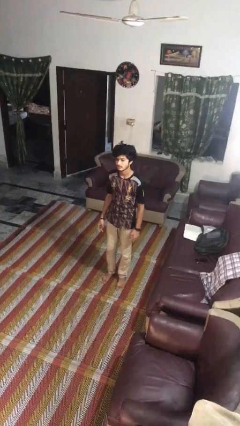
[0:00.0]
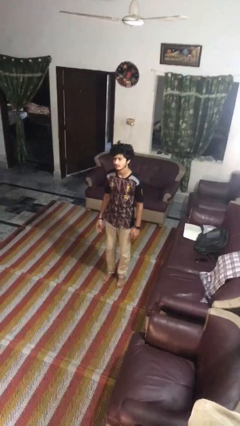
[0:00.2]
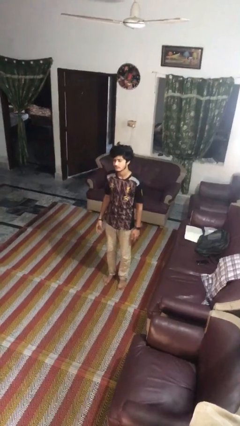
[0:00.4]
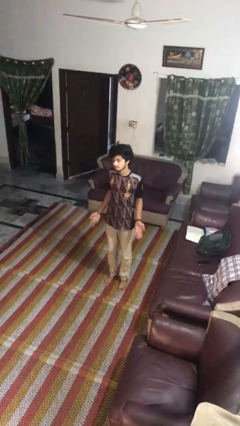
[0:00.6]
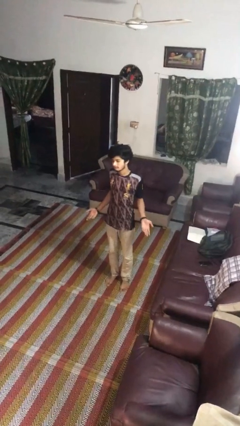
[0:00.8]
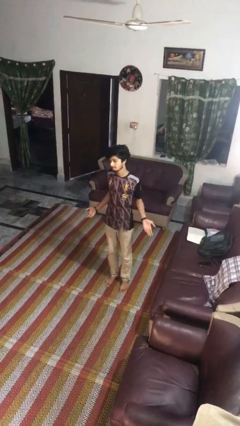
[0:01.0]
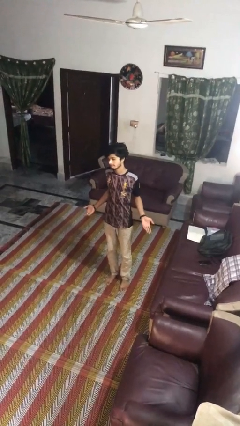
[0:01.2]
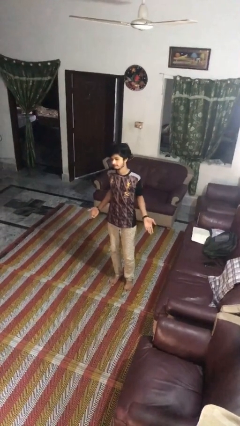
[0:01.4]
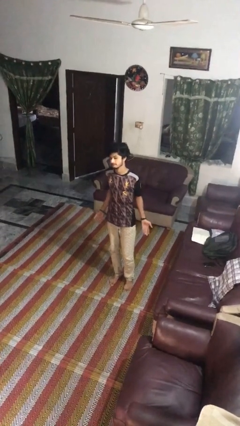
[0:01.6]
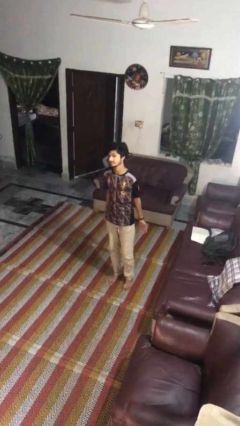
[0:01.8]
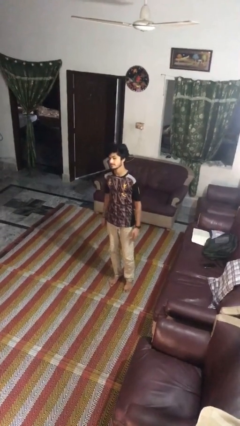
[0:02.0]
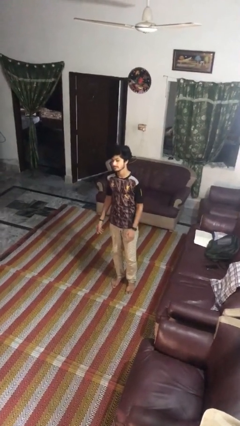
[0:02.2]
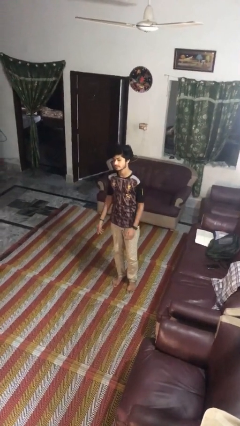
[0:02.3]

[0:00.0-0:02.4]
person shrugs

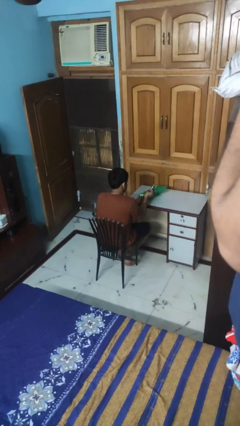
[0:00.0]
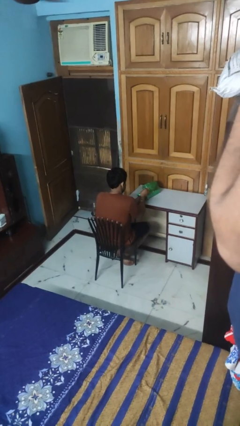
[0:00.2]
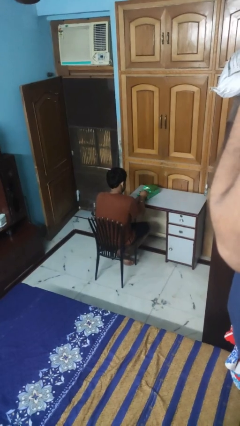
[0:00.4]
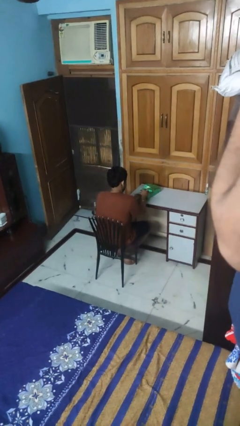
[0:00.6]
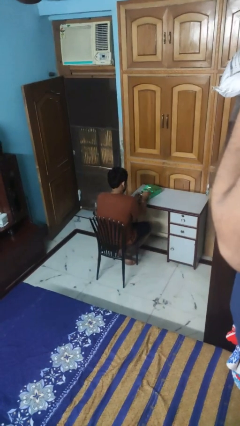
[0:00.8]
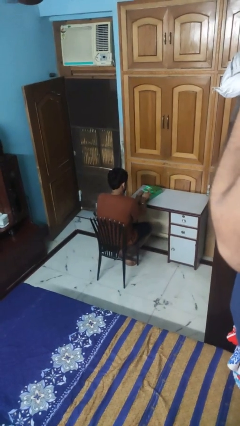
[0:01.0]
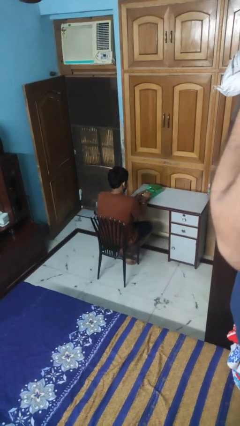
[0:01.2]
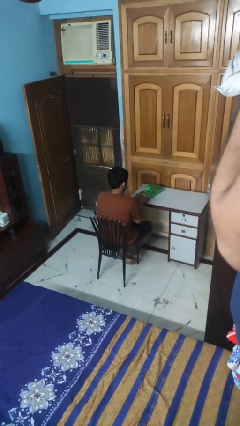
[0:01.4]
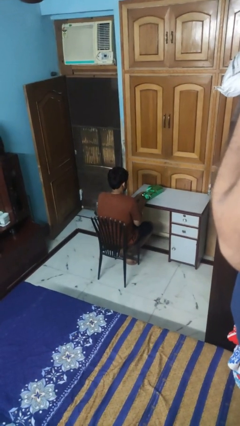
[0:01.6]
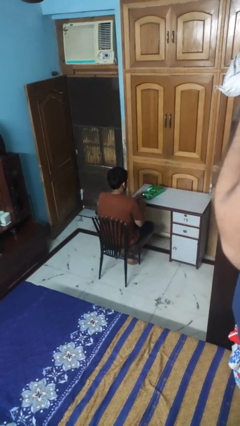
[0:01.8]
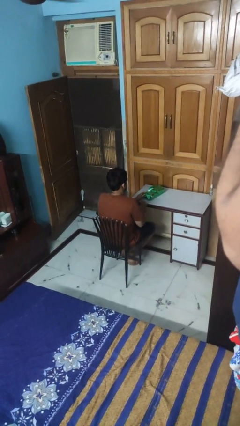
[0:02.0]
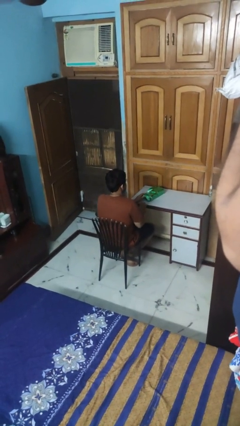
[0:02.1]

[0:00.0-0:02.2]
person wraps box

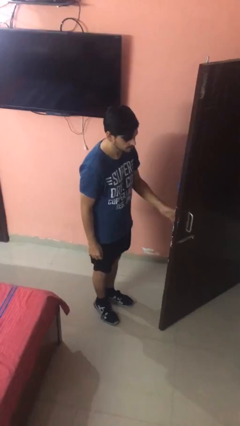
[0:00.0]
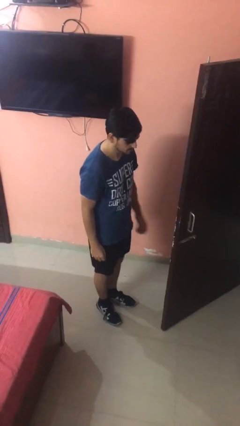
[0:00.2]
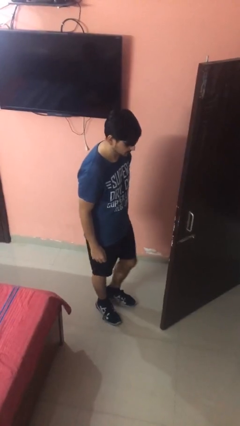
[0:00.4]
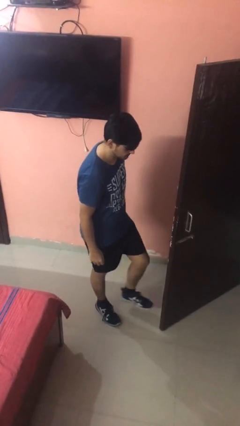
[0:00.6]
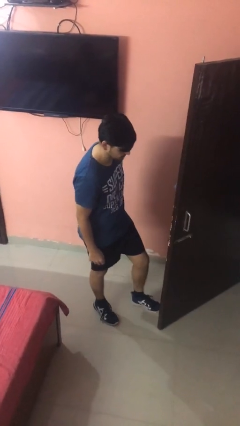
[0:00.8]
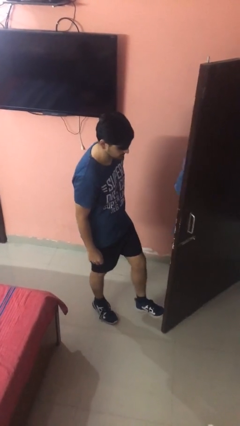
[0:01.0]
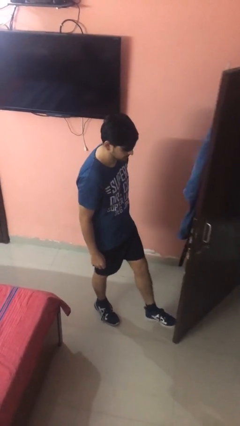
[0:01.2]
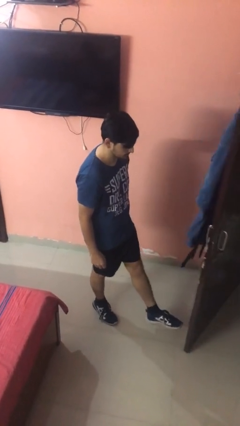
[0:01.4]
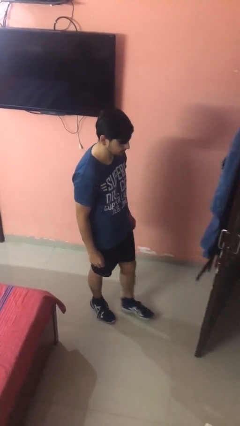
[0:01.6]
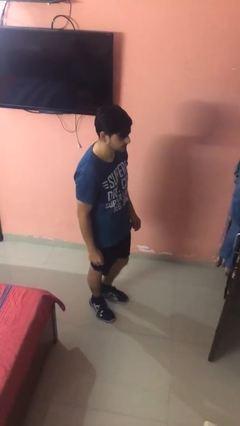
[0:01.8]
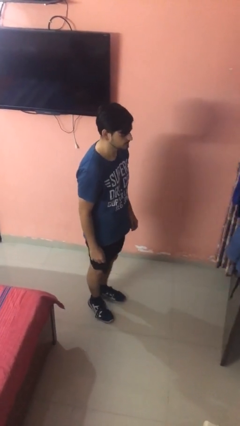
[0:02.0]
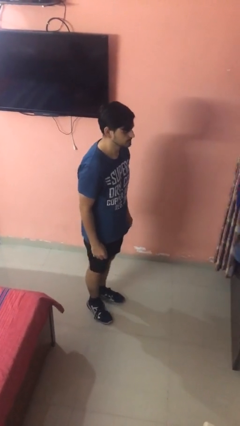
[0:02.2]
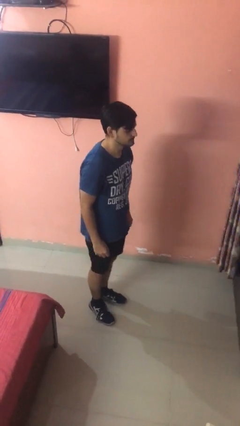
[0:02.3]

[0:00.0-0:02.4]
person closes door with foot

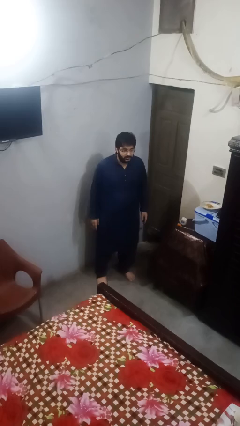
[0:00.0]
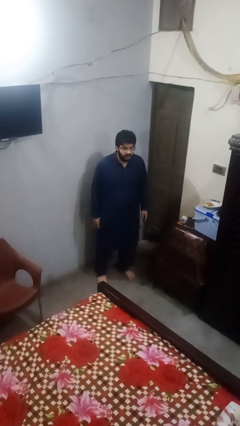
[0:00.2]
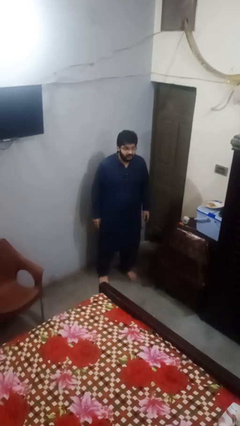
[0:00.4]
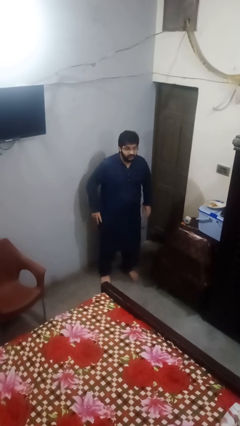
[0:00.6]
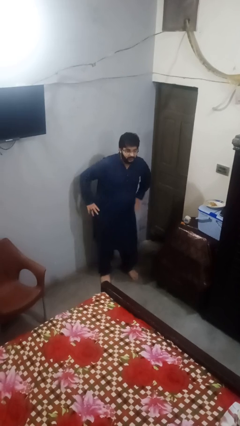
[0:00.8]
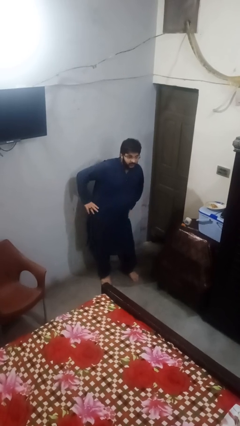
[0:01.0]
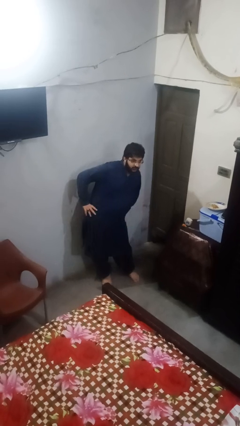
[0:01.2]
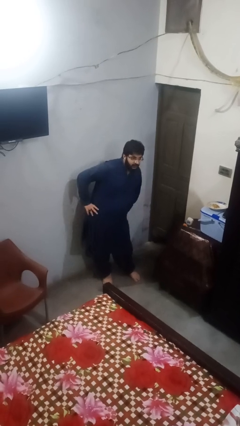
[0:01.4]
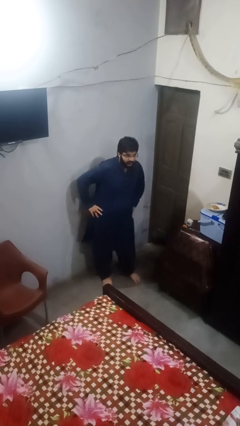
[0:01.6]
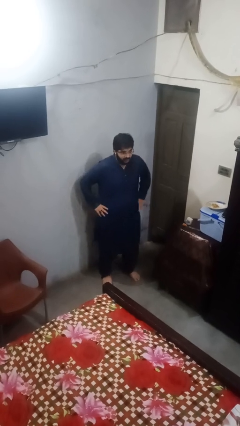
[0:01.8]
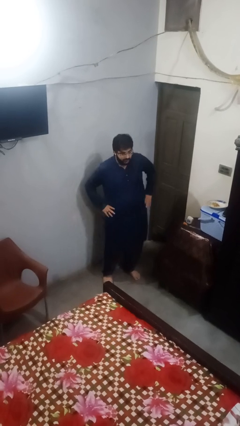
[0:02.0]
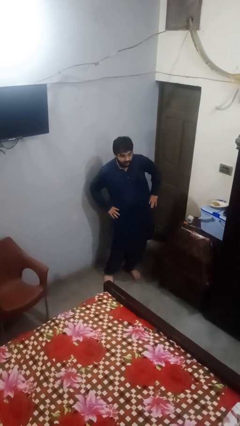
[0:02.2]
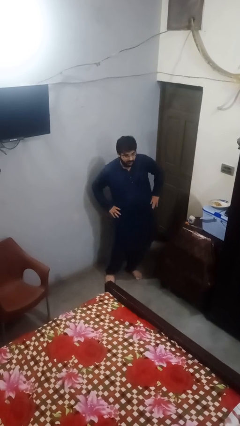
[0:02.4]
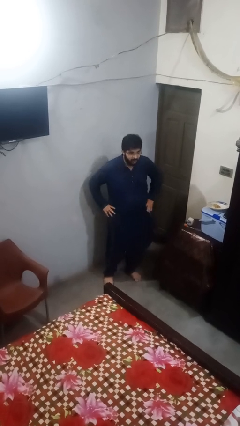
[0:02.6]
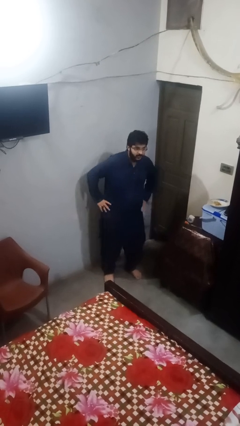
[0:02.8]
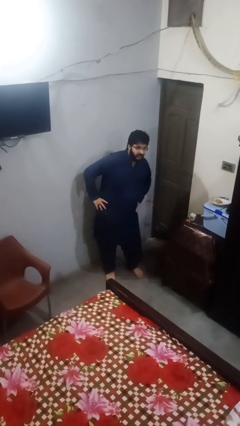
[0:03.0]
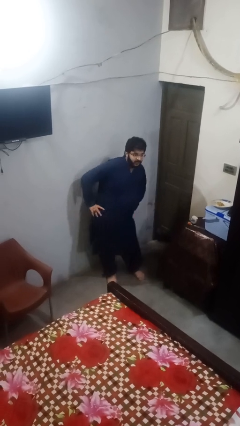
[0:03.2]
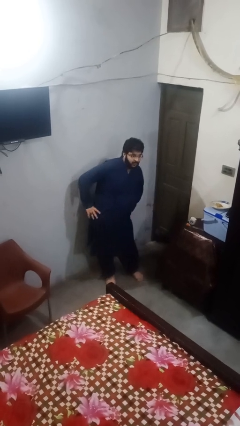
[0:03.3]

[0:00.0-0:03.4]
person wiggles hips

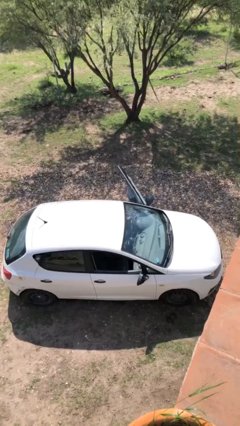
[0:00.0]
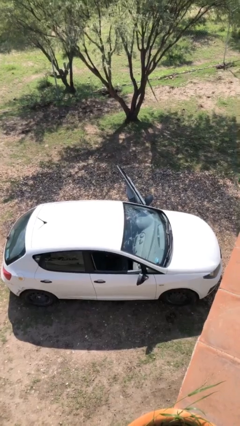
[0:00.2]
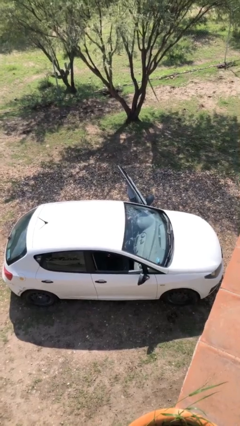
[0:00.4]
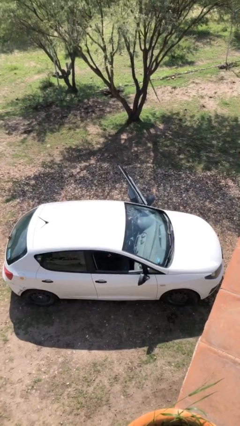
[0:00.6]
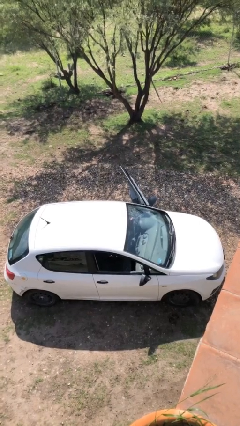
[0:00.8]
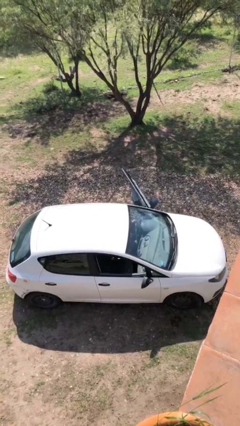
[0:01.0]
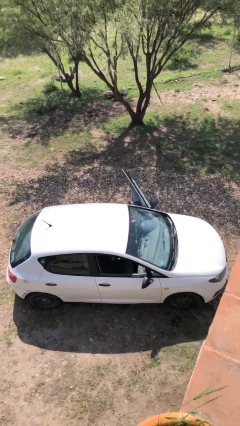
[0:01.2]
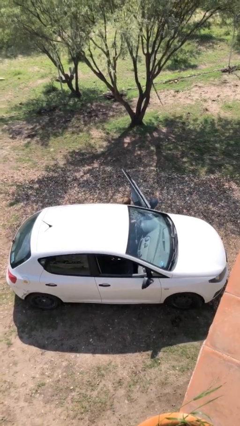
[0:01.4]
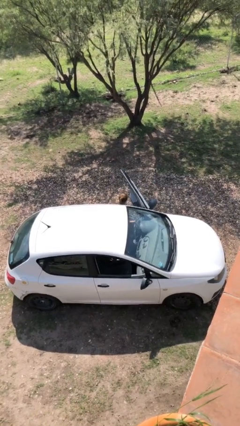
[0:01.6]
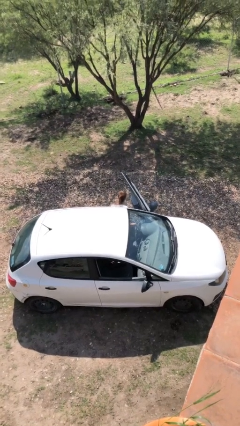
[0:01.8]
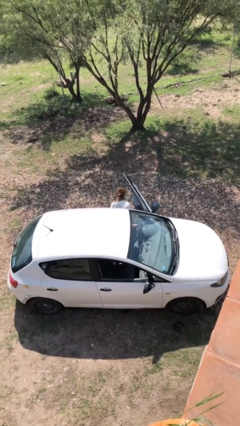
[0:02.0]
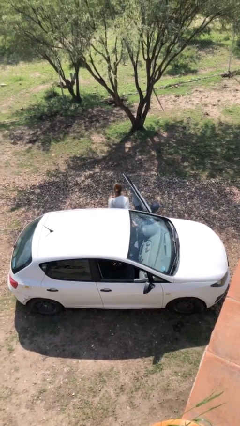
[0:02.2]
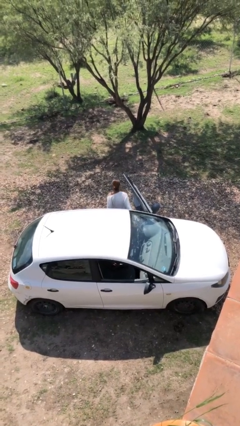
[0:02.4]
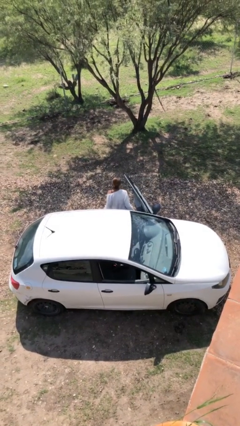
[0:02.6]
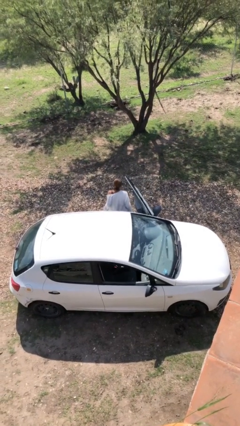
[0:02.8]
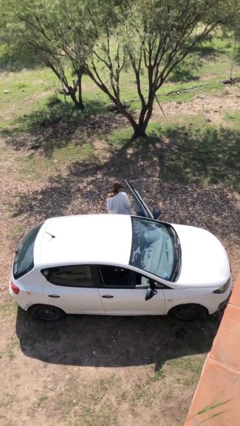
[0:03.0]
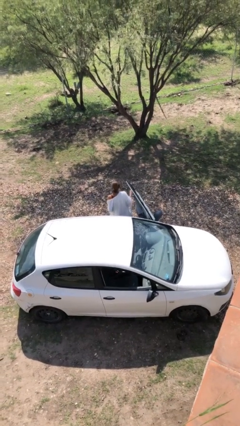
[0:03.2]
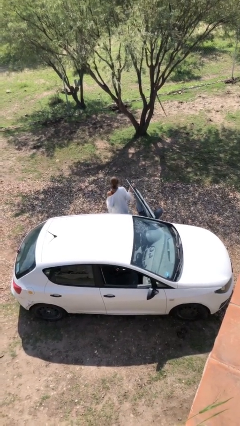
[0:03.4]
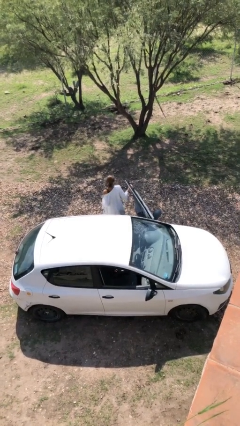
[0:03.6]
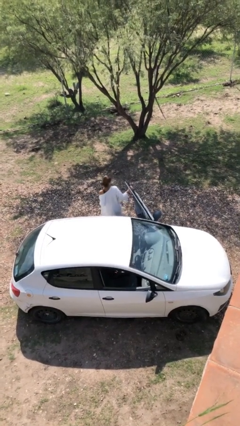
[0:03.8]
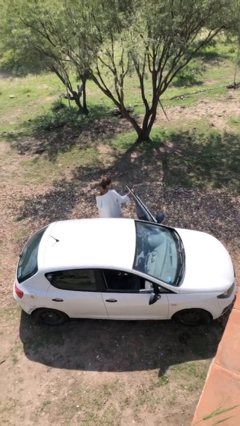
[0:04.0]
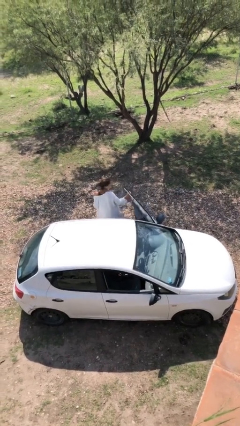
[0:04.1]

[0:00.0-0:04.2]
person exits car

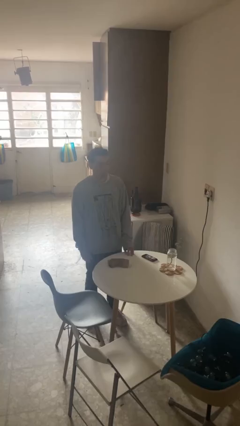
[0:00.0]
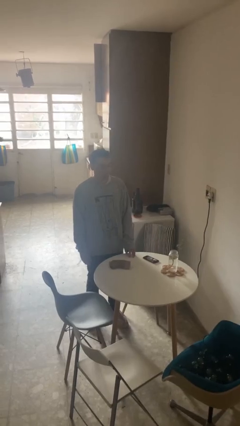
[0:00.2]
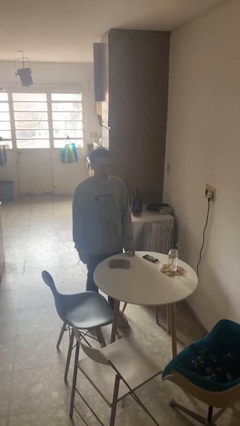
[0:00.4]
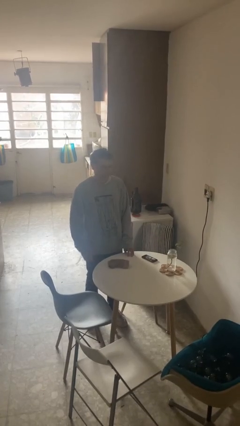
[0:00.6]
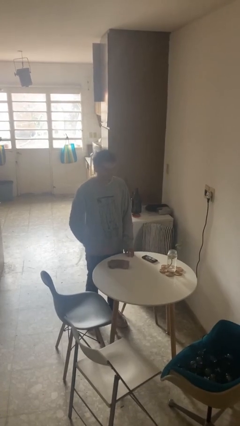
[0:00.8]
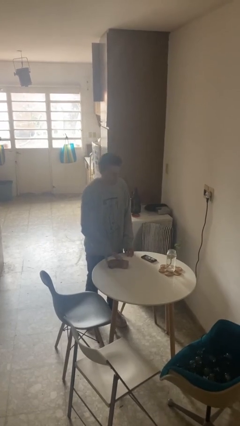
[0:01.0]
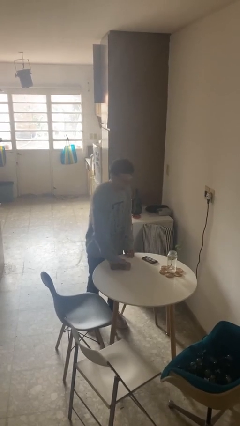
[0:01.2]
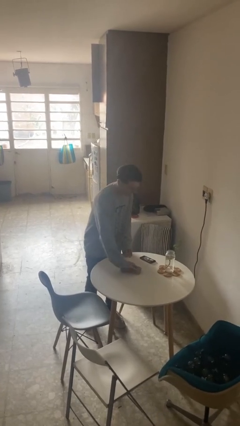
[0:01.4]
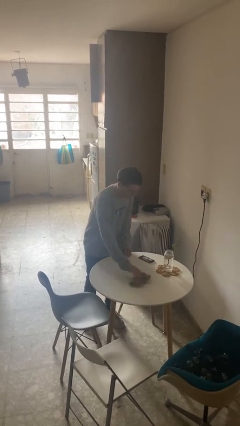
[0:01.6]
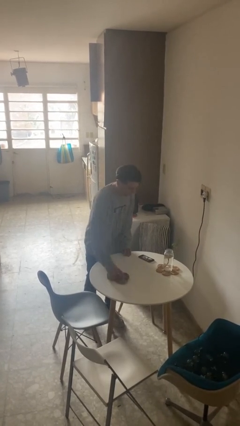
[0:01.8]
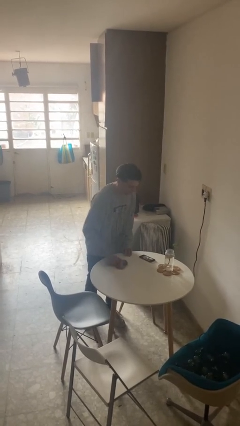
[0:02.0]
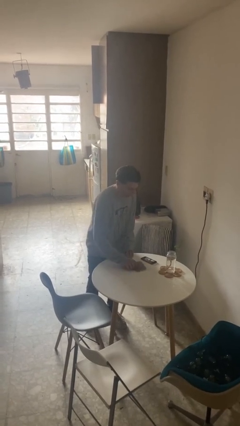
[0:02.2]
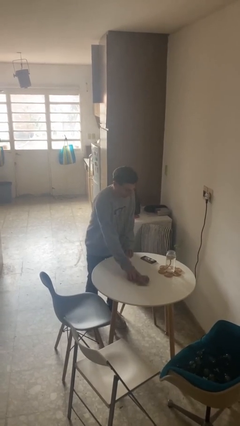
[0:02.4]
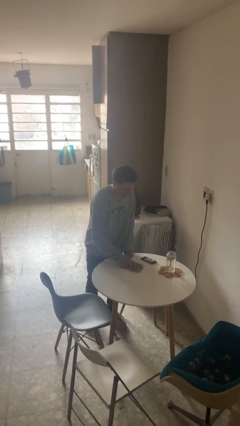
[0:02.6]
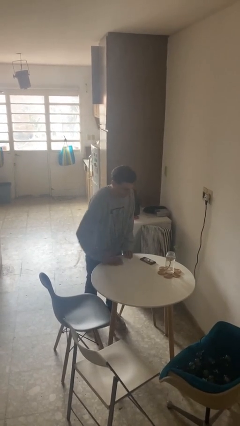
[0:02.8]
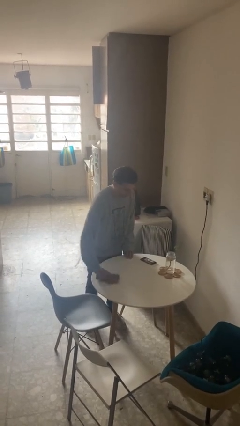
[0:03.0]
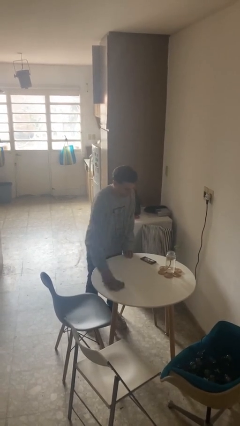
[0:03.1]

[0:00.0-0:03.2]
person cleans table with rag
